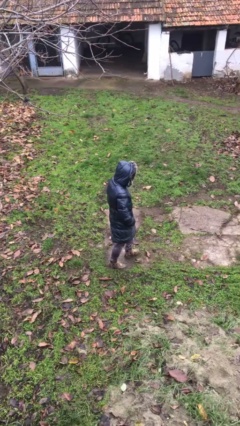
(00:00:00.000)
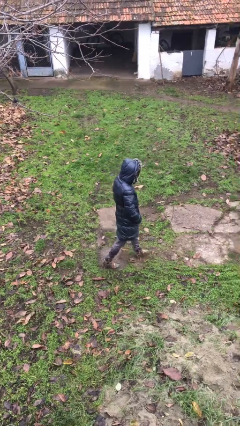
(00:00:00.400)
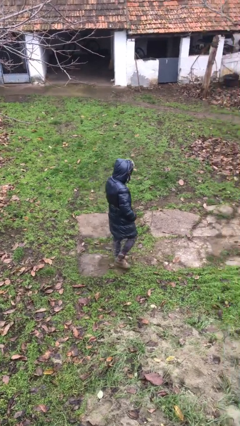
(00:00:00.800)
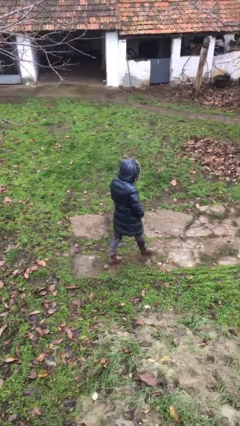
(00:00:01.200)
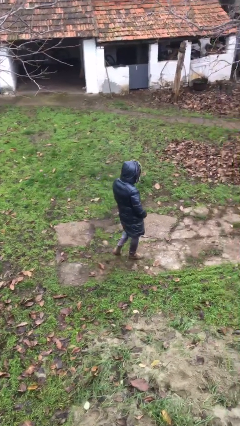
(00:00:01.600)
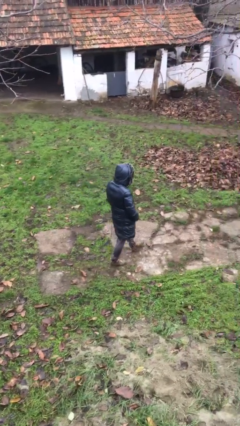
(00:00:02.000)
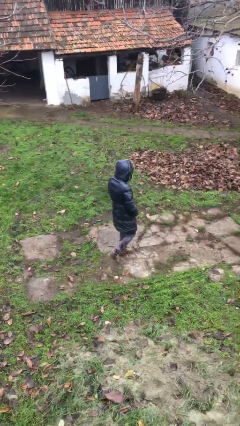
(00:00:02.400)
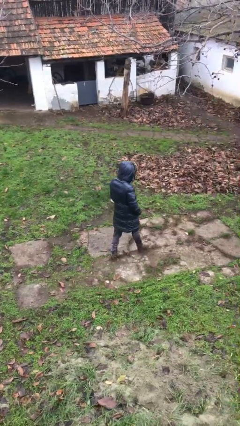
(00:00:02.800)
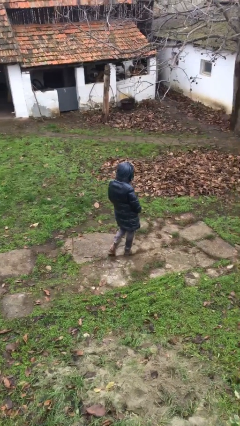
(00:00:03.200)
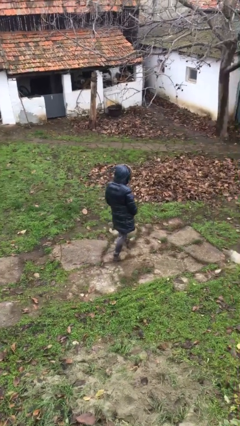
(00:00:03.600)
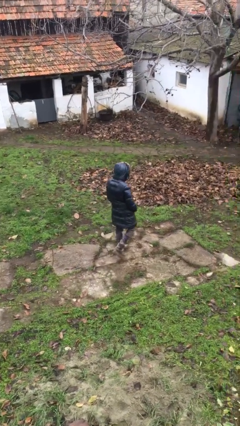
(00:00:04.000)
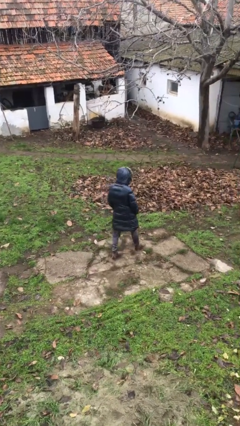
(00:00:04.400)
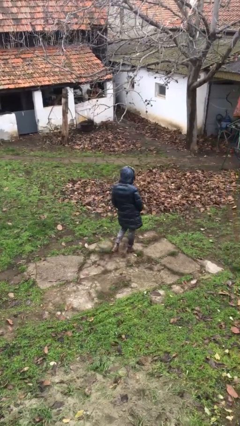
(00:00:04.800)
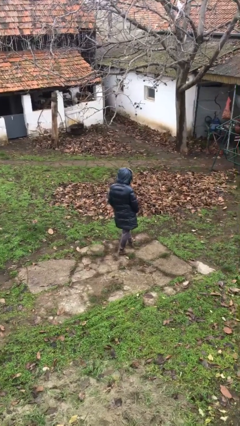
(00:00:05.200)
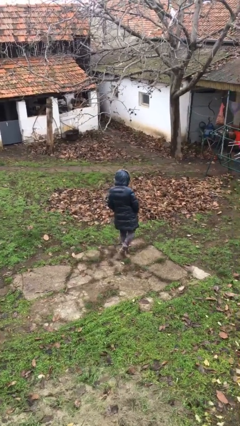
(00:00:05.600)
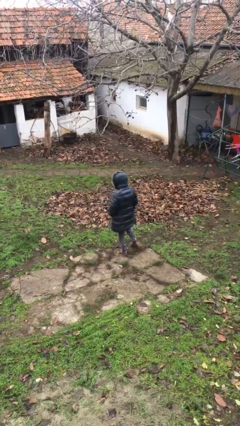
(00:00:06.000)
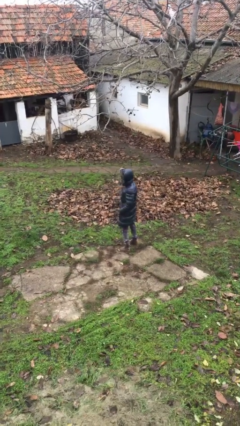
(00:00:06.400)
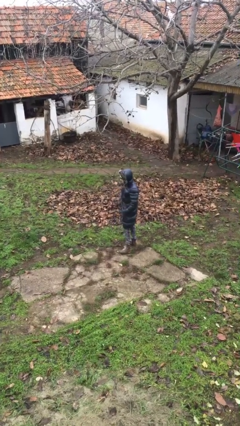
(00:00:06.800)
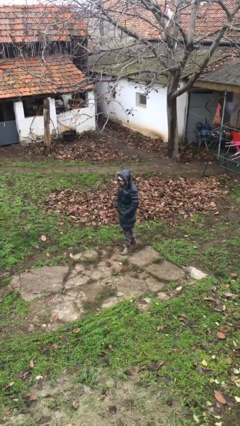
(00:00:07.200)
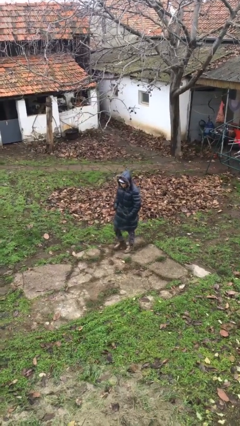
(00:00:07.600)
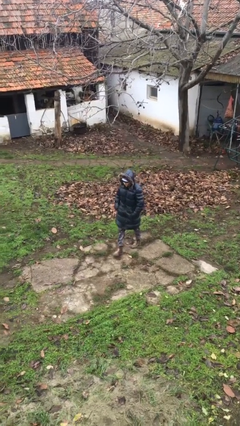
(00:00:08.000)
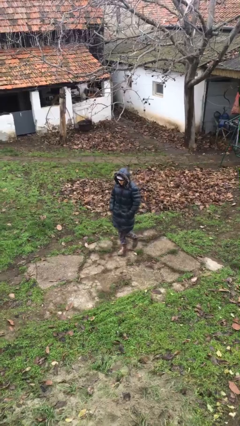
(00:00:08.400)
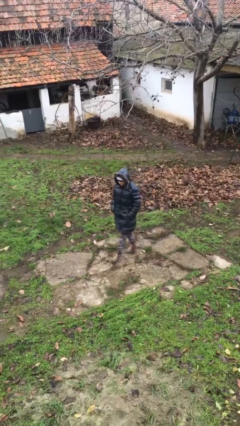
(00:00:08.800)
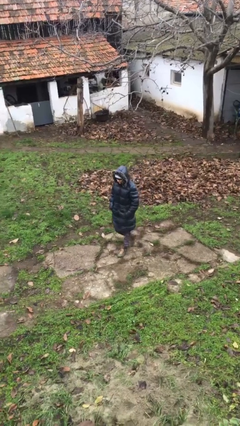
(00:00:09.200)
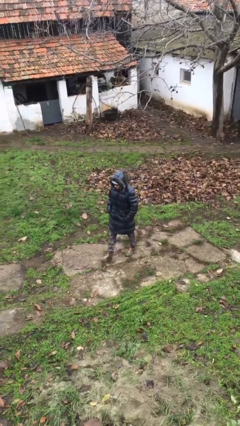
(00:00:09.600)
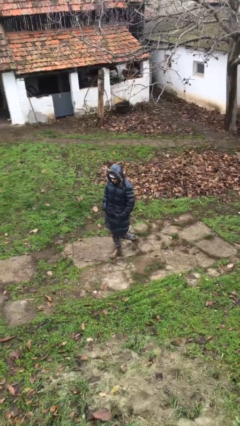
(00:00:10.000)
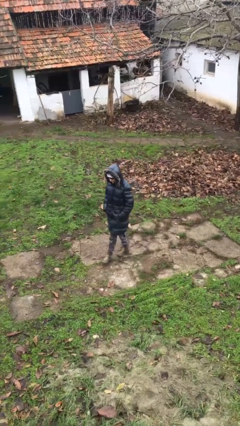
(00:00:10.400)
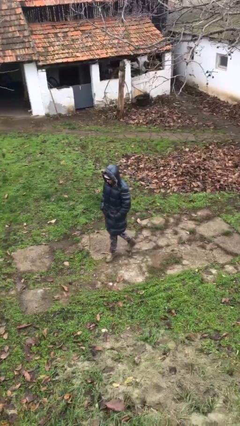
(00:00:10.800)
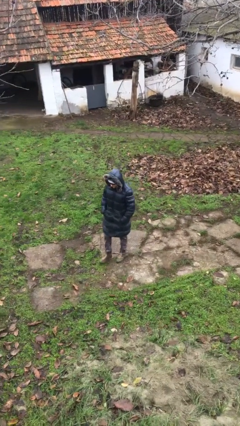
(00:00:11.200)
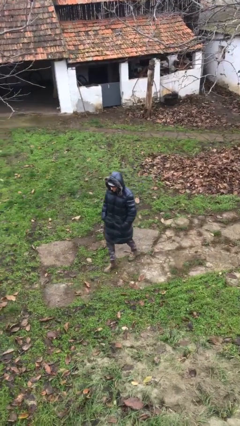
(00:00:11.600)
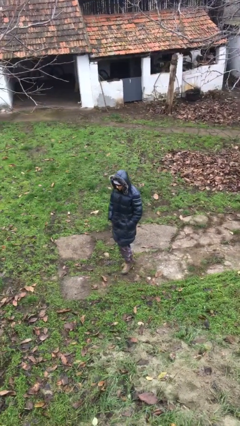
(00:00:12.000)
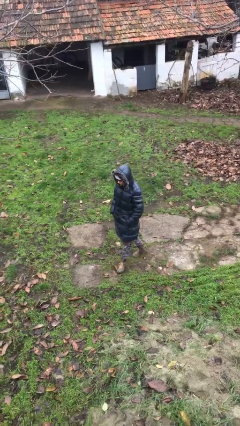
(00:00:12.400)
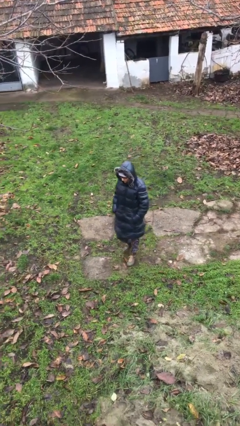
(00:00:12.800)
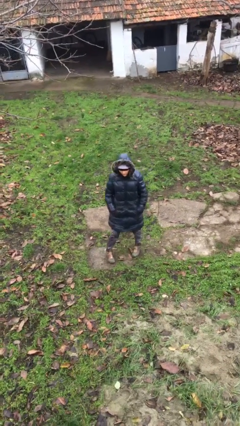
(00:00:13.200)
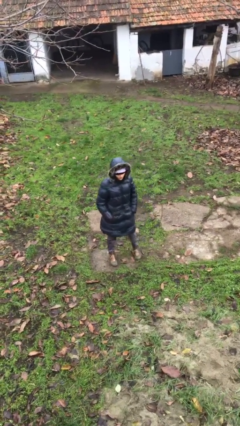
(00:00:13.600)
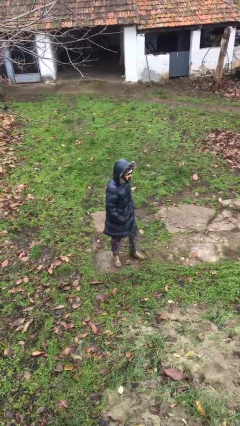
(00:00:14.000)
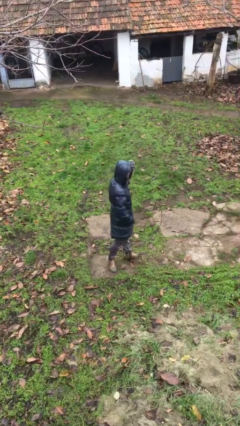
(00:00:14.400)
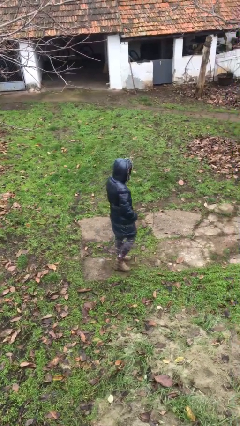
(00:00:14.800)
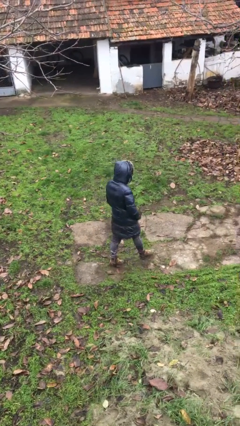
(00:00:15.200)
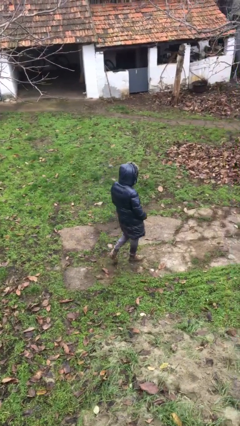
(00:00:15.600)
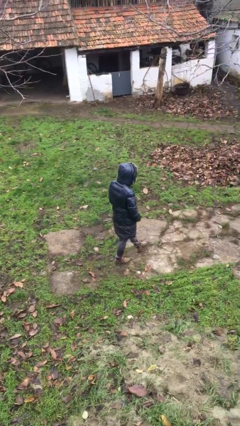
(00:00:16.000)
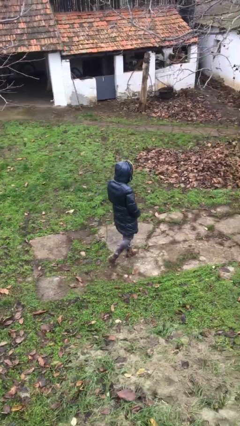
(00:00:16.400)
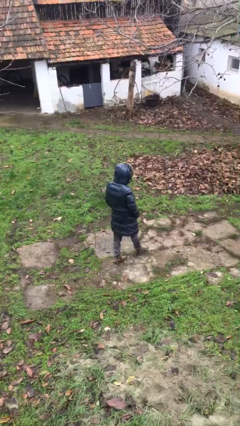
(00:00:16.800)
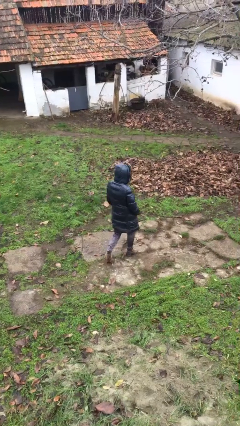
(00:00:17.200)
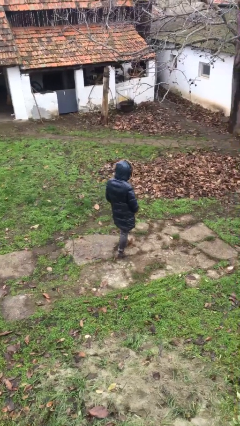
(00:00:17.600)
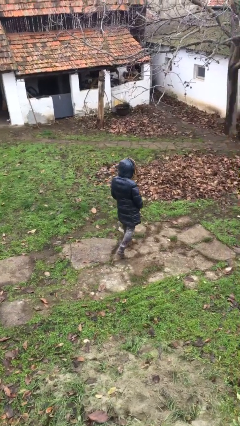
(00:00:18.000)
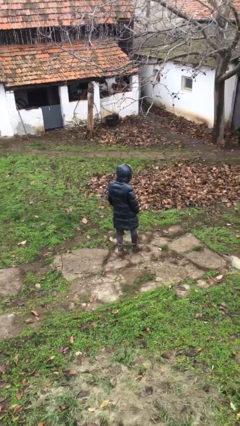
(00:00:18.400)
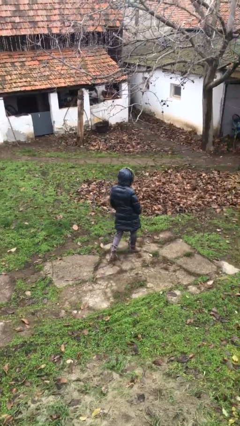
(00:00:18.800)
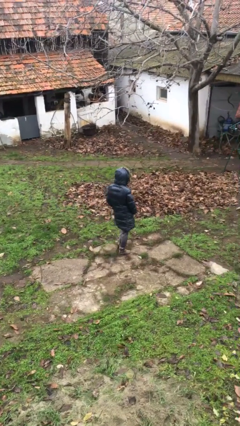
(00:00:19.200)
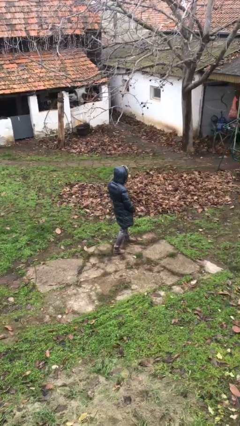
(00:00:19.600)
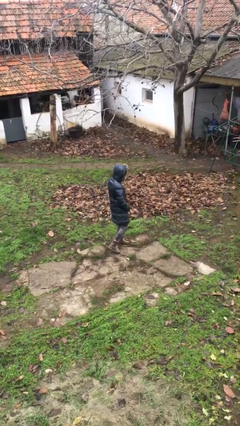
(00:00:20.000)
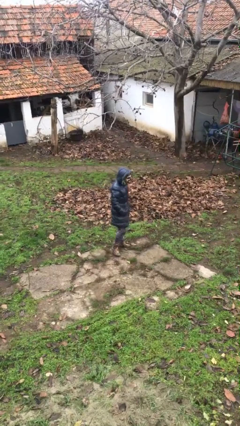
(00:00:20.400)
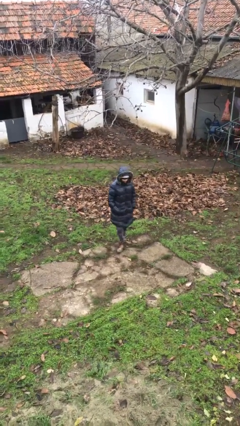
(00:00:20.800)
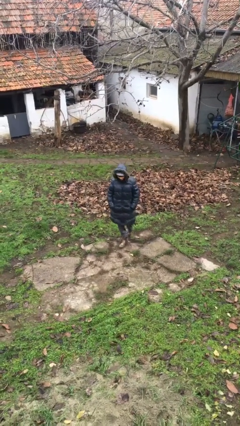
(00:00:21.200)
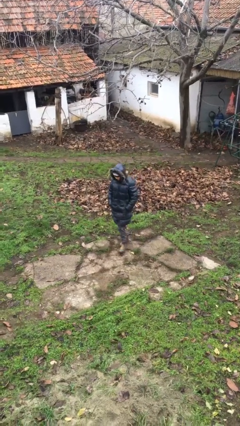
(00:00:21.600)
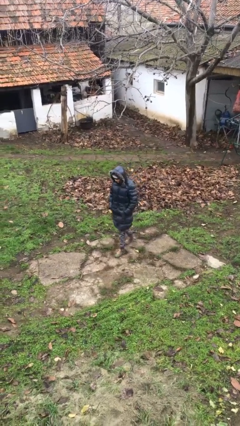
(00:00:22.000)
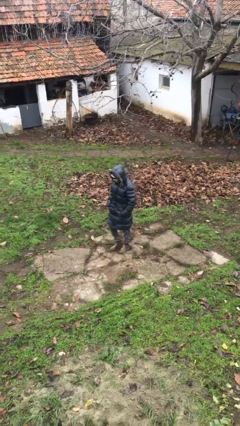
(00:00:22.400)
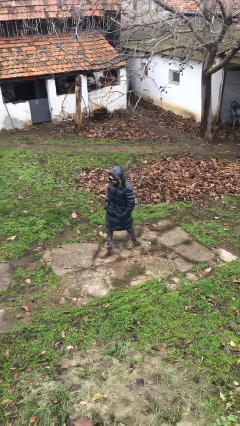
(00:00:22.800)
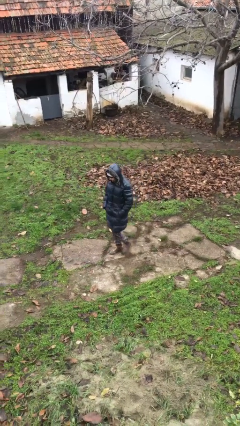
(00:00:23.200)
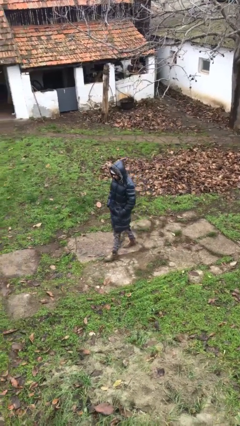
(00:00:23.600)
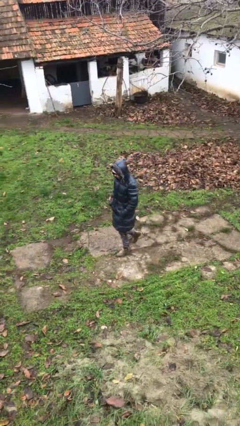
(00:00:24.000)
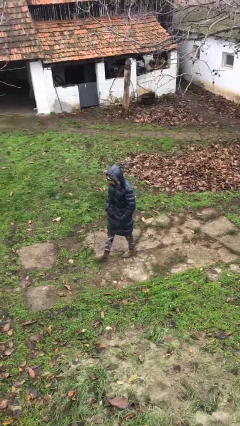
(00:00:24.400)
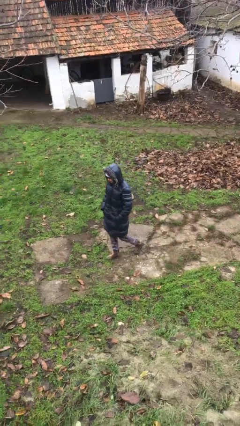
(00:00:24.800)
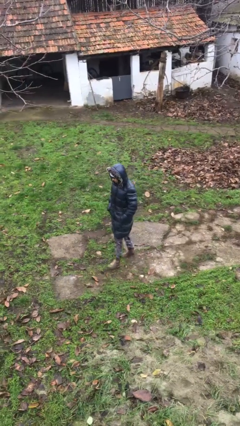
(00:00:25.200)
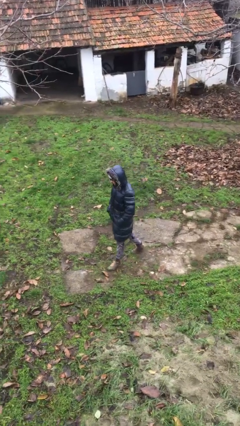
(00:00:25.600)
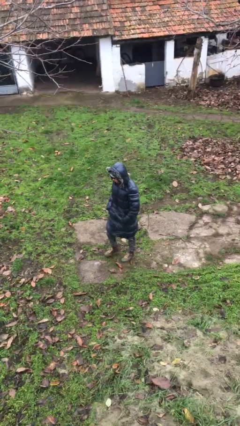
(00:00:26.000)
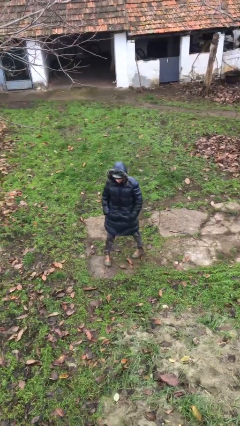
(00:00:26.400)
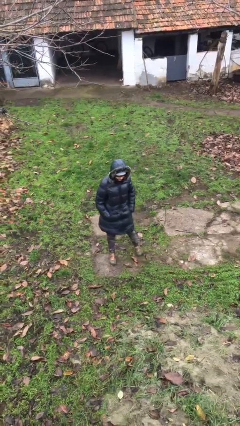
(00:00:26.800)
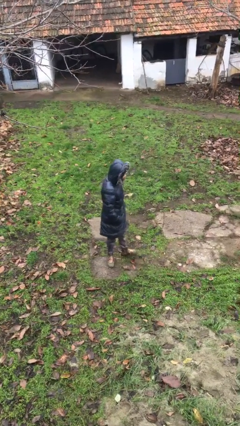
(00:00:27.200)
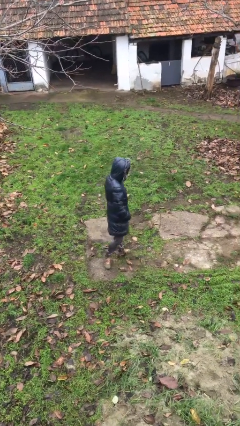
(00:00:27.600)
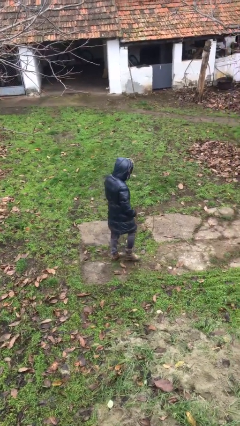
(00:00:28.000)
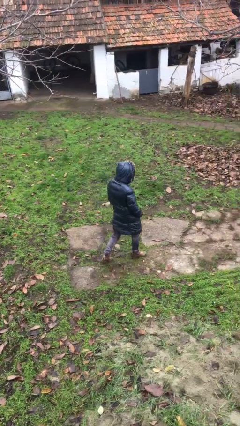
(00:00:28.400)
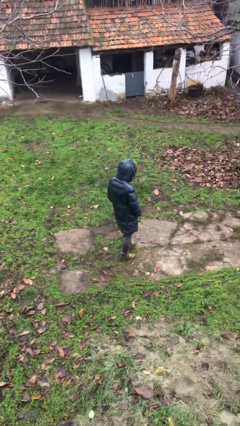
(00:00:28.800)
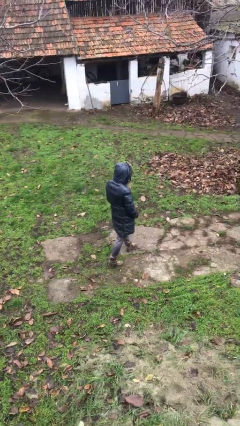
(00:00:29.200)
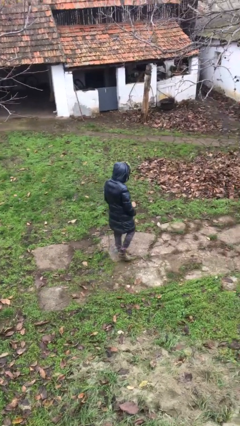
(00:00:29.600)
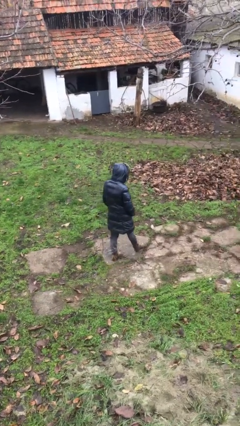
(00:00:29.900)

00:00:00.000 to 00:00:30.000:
person walks

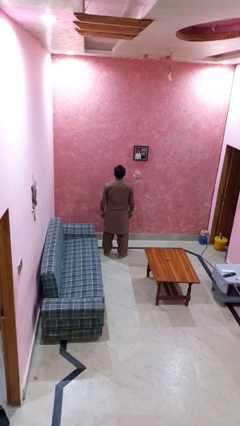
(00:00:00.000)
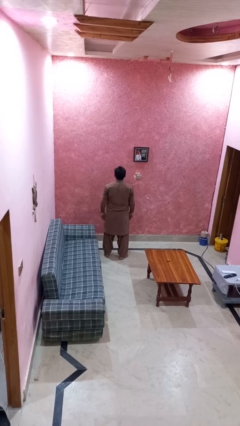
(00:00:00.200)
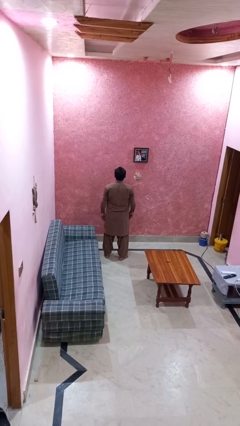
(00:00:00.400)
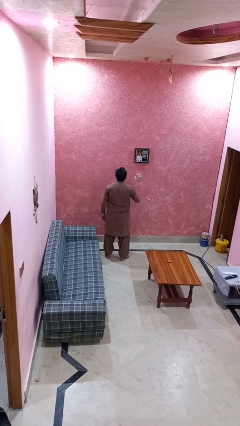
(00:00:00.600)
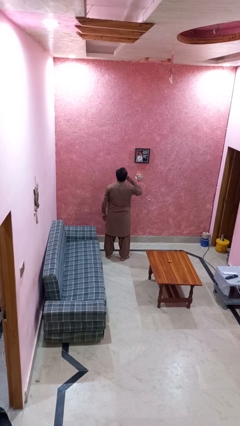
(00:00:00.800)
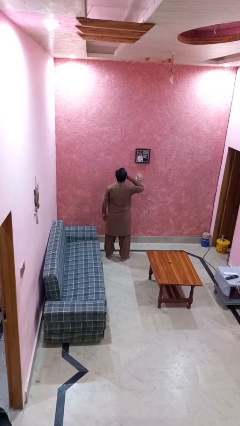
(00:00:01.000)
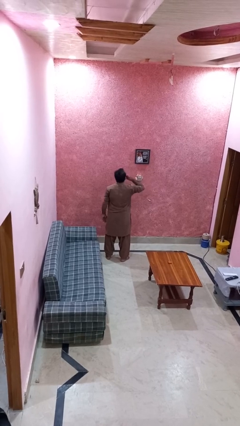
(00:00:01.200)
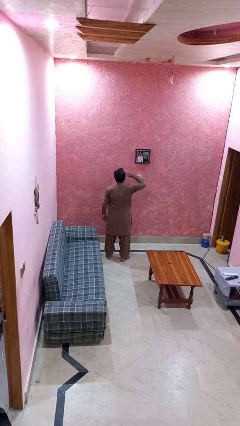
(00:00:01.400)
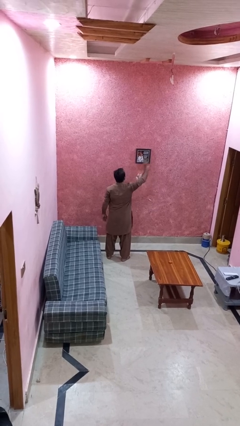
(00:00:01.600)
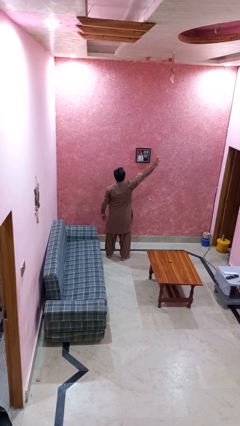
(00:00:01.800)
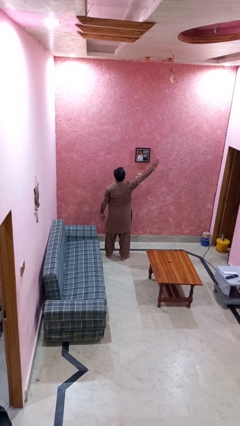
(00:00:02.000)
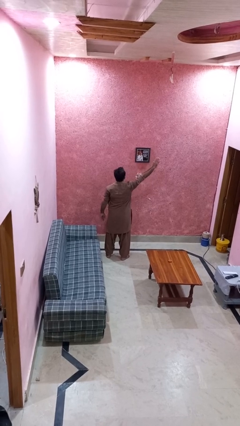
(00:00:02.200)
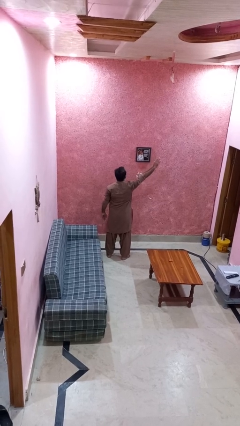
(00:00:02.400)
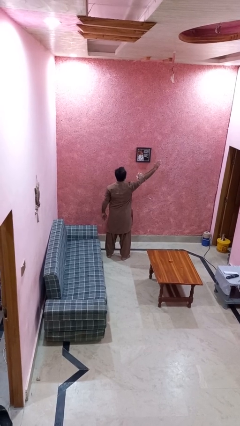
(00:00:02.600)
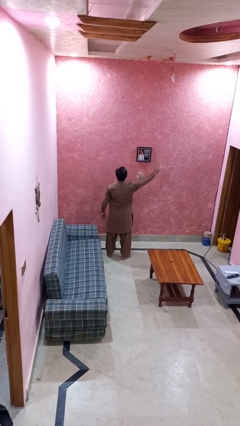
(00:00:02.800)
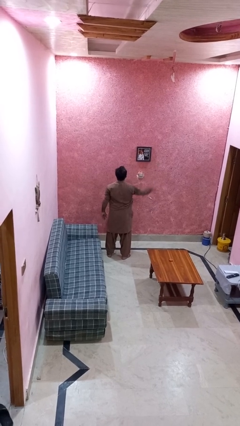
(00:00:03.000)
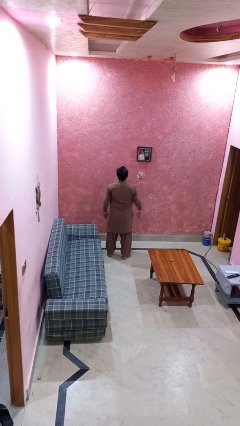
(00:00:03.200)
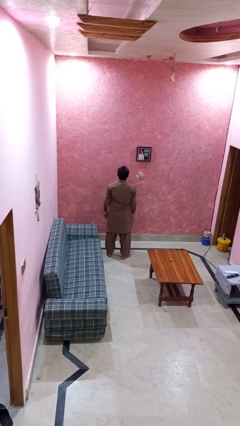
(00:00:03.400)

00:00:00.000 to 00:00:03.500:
person gestures blow kiss
